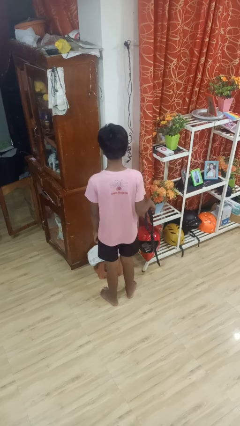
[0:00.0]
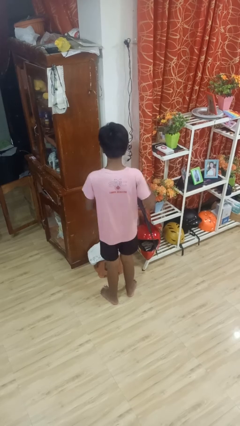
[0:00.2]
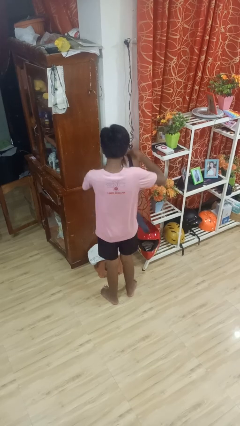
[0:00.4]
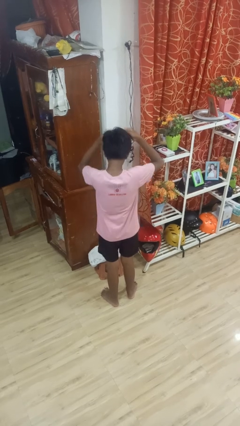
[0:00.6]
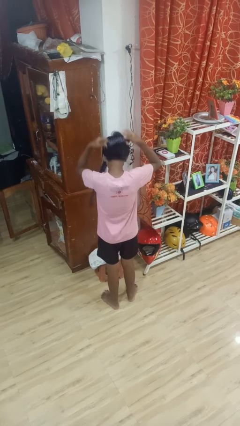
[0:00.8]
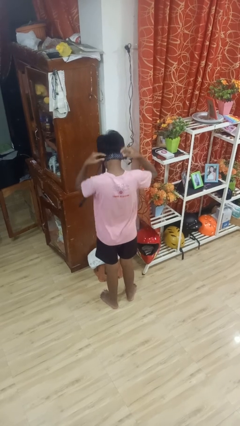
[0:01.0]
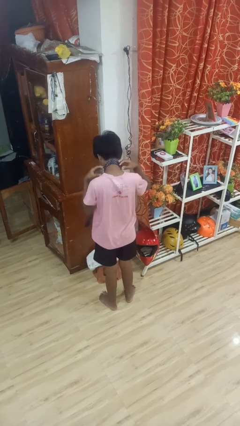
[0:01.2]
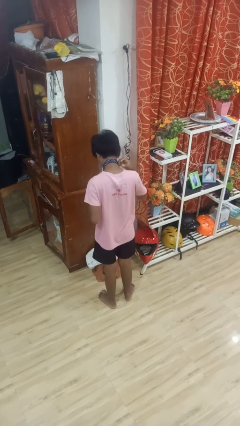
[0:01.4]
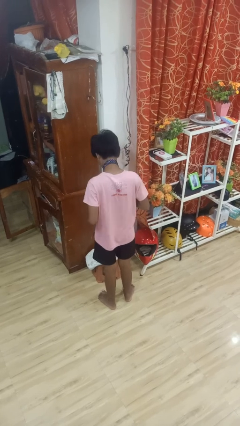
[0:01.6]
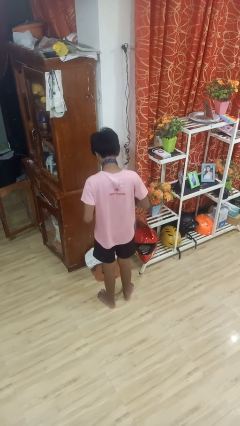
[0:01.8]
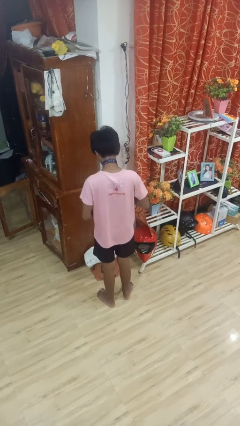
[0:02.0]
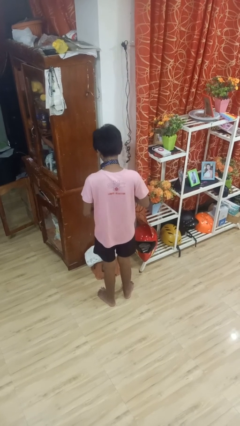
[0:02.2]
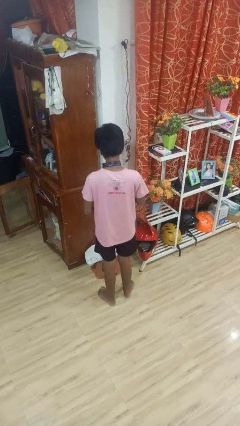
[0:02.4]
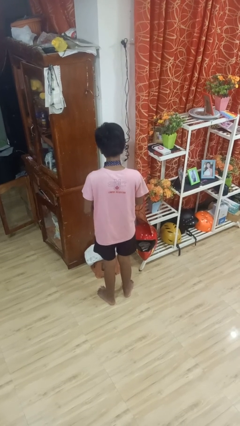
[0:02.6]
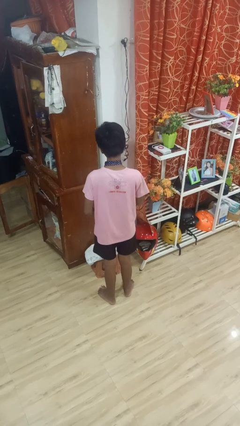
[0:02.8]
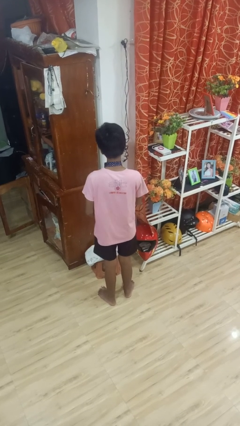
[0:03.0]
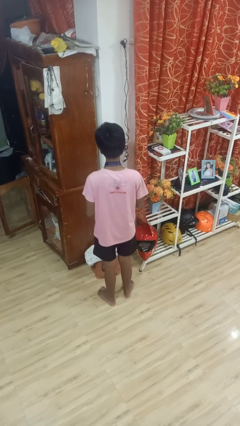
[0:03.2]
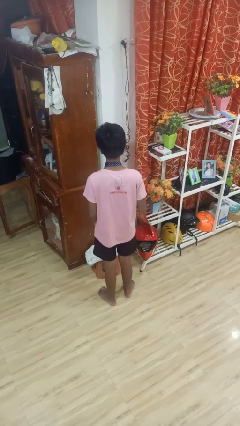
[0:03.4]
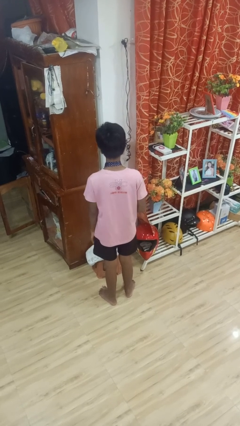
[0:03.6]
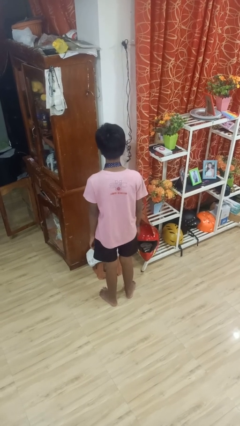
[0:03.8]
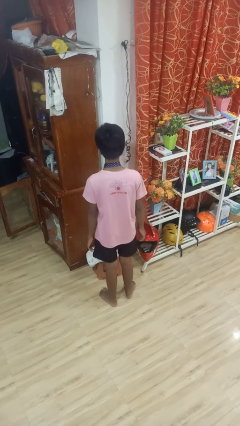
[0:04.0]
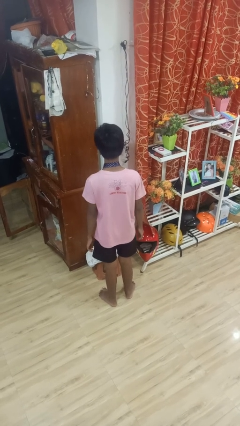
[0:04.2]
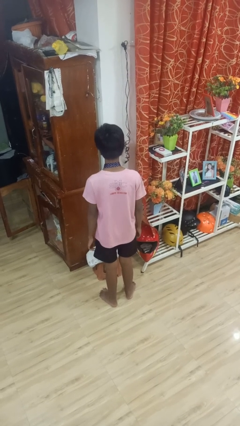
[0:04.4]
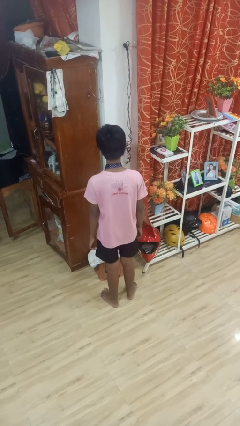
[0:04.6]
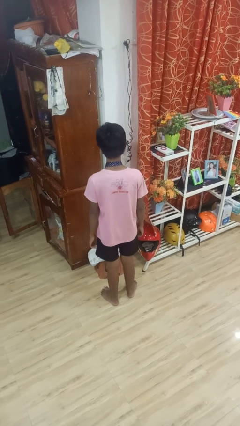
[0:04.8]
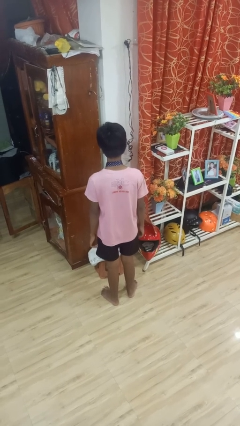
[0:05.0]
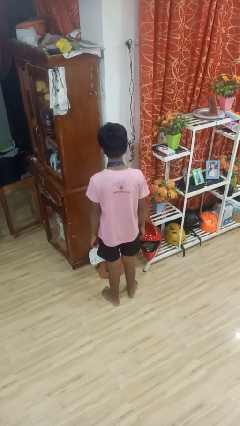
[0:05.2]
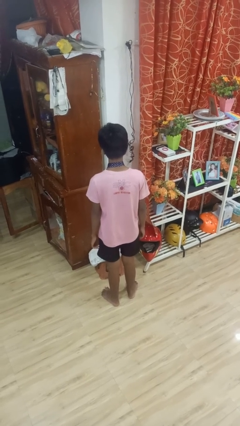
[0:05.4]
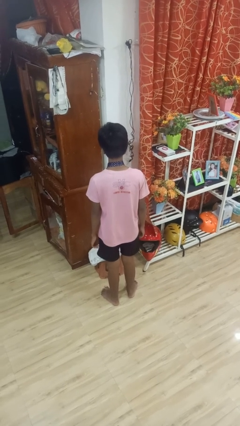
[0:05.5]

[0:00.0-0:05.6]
person puts on necktie

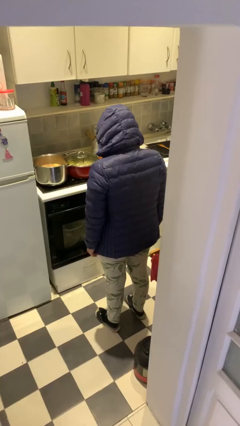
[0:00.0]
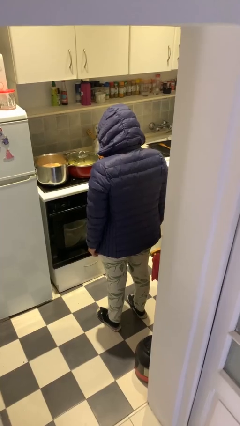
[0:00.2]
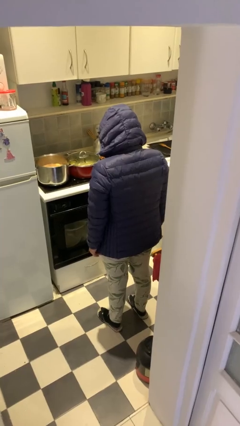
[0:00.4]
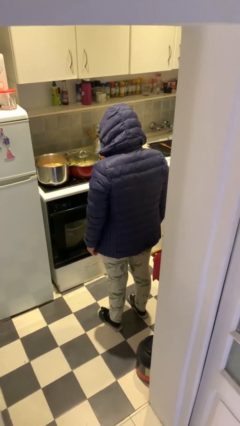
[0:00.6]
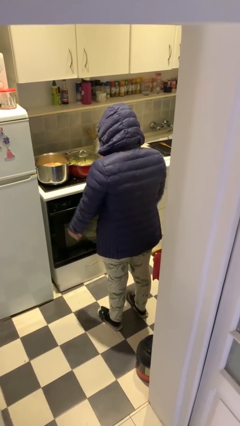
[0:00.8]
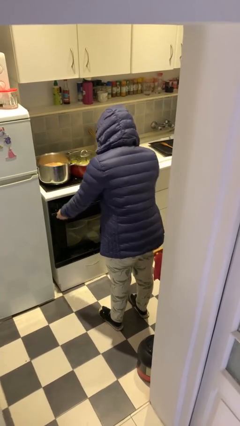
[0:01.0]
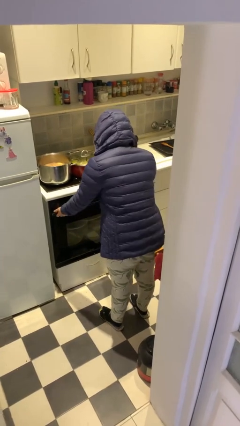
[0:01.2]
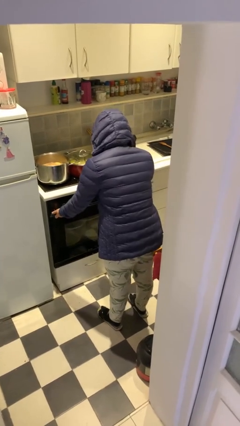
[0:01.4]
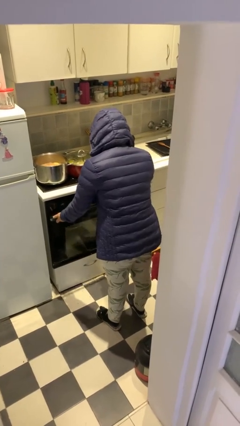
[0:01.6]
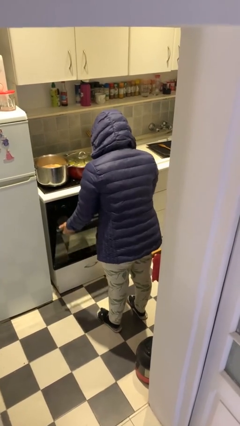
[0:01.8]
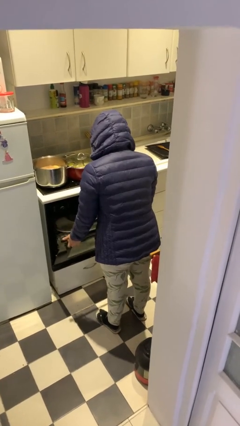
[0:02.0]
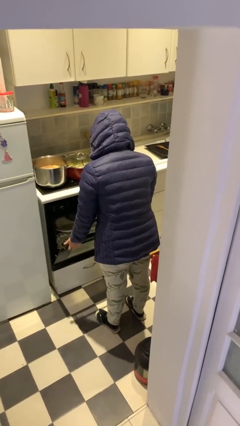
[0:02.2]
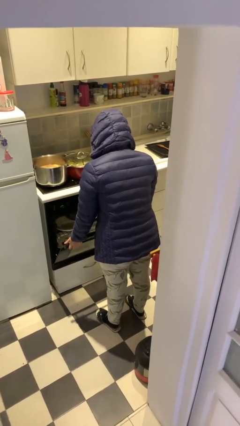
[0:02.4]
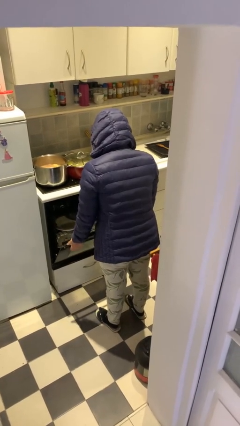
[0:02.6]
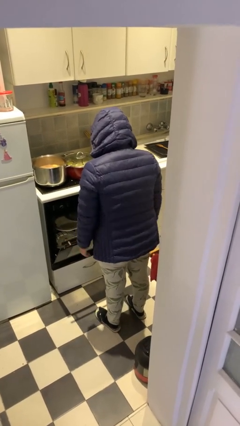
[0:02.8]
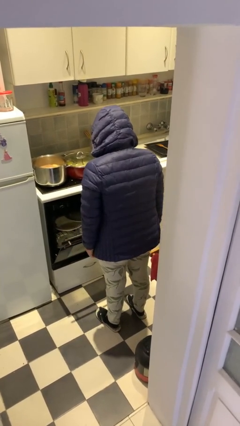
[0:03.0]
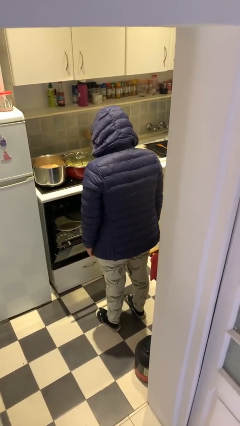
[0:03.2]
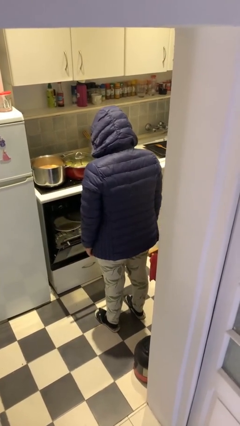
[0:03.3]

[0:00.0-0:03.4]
person opens dishwasher

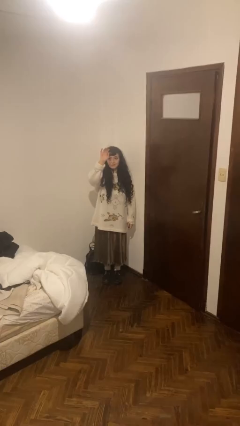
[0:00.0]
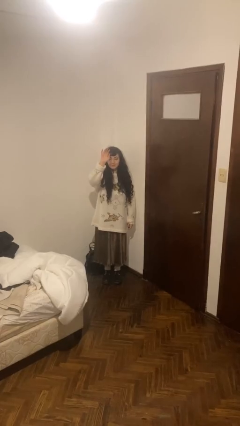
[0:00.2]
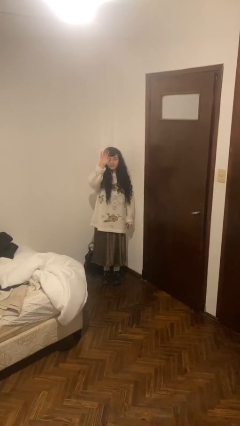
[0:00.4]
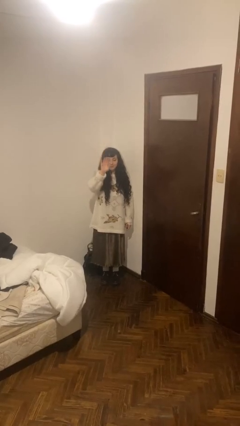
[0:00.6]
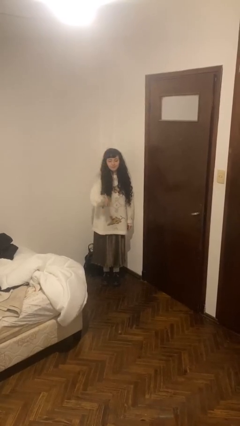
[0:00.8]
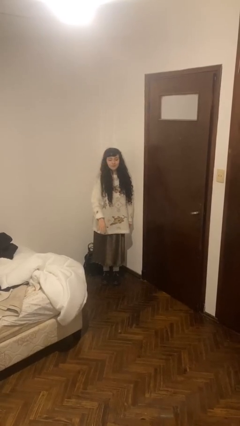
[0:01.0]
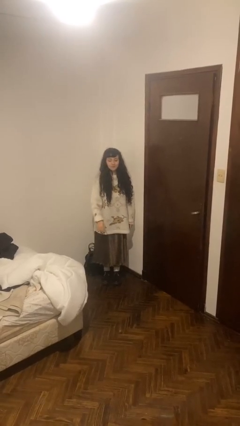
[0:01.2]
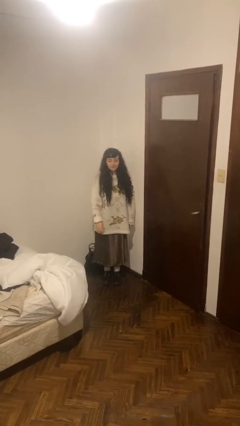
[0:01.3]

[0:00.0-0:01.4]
person gestures swipe down

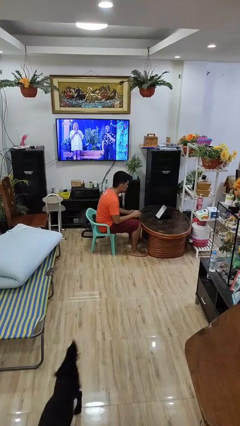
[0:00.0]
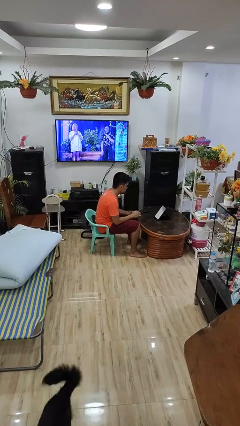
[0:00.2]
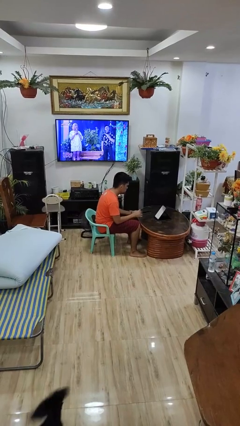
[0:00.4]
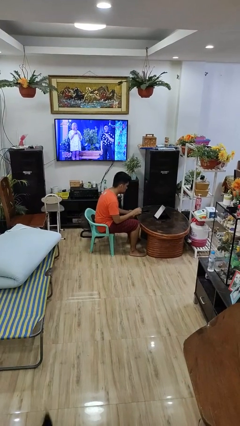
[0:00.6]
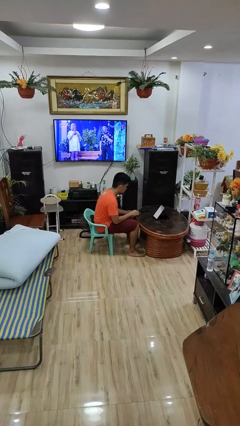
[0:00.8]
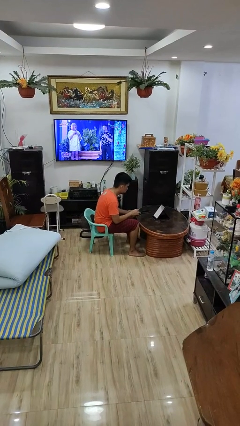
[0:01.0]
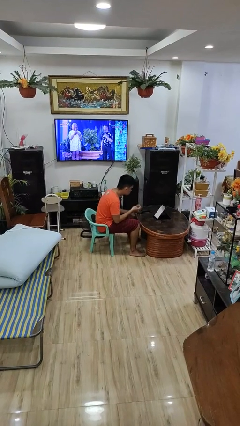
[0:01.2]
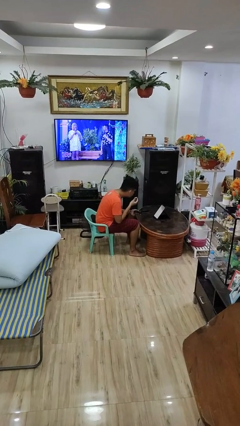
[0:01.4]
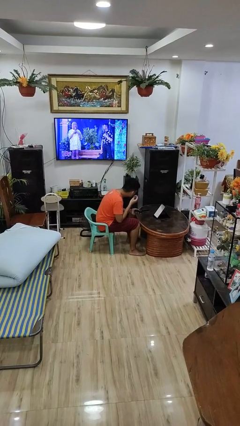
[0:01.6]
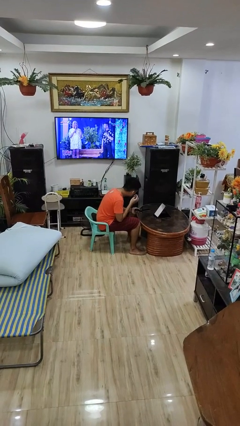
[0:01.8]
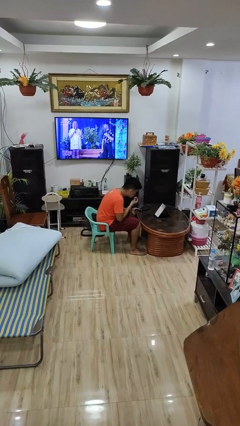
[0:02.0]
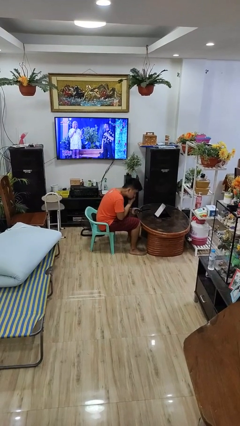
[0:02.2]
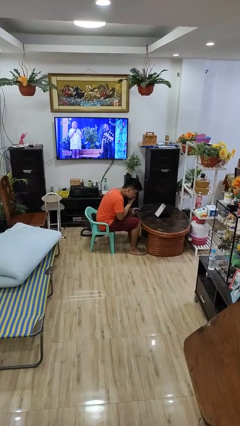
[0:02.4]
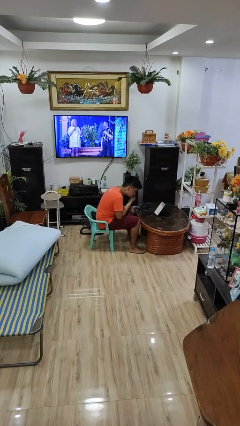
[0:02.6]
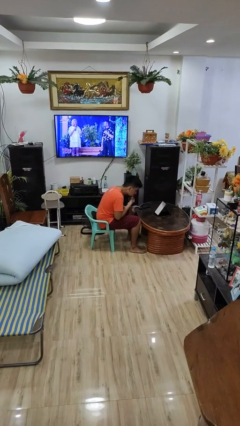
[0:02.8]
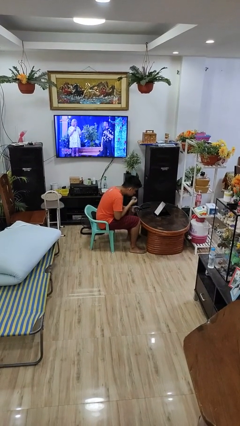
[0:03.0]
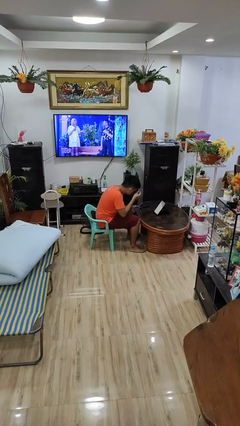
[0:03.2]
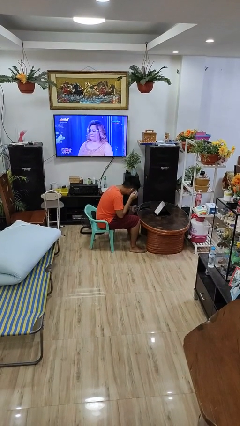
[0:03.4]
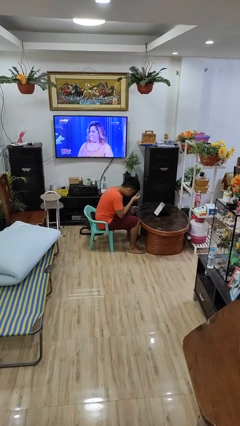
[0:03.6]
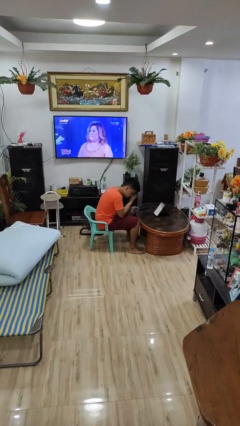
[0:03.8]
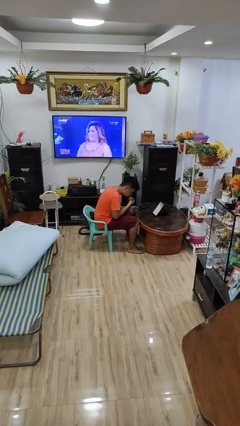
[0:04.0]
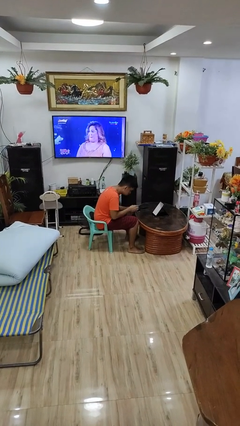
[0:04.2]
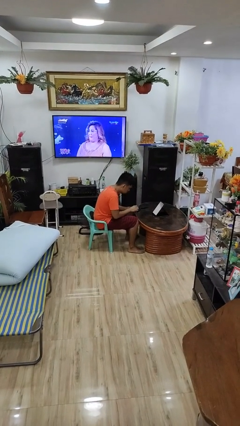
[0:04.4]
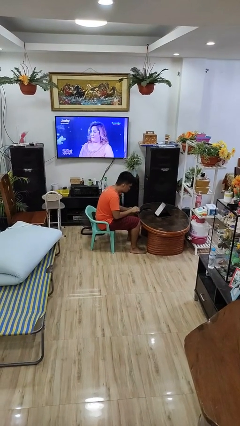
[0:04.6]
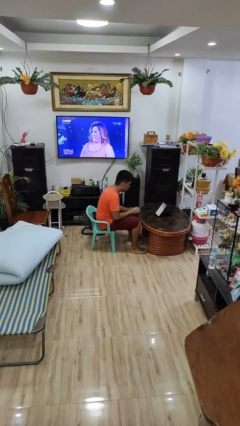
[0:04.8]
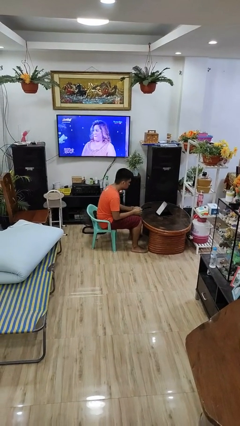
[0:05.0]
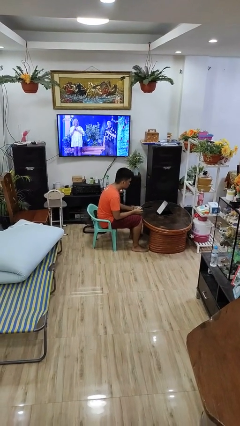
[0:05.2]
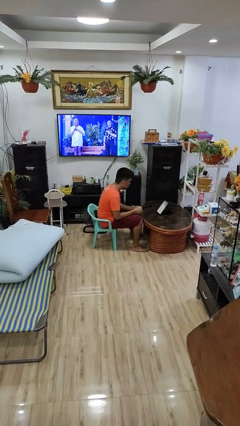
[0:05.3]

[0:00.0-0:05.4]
person applies foundation makeup

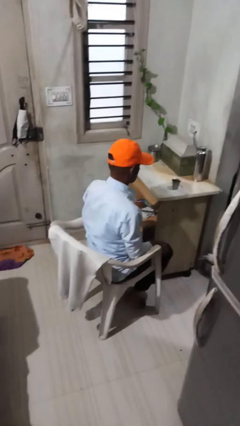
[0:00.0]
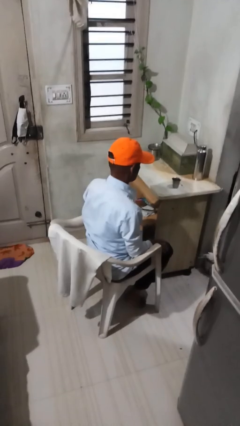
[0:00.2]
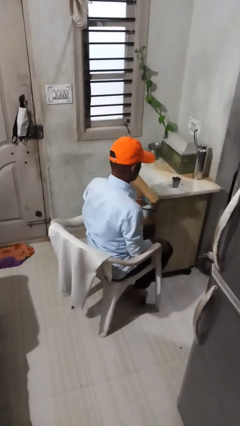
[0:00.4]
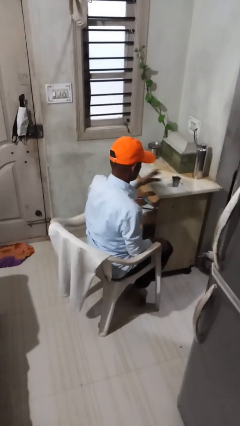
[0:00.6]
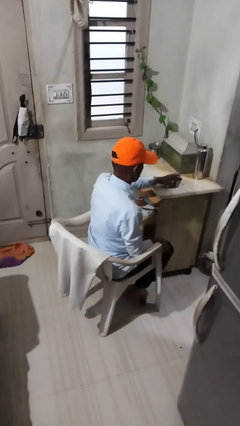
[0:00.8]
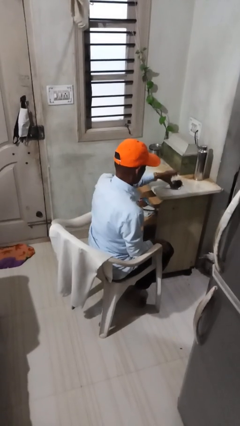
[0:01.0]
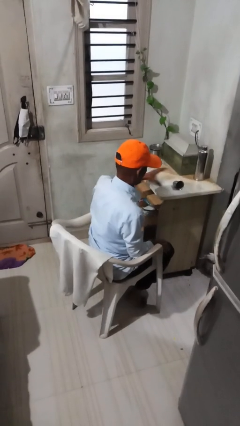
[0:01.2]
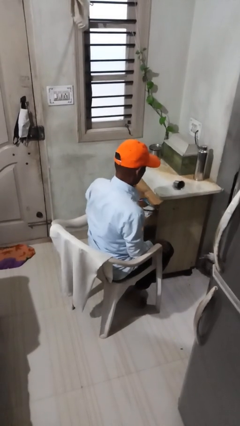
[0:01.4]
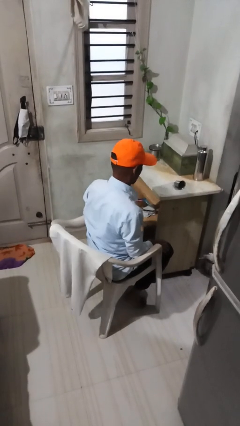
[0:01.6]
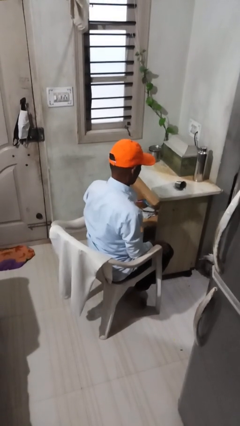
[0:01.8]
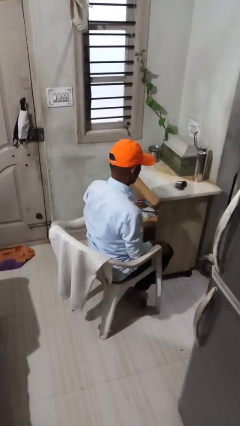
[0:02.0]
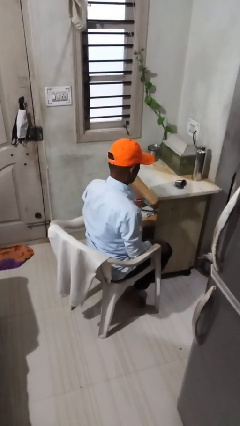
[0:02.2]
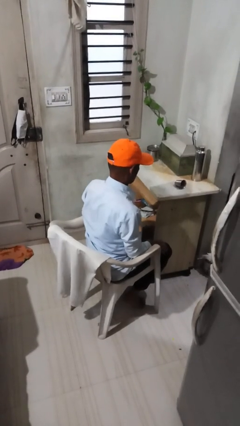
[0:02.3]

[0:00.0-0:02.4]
person knocks over glass
